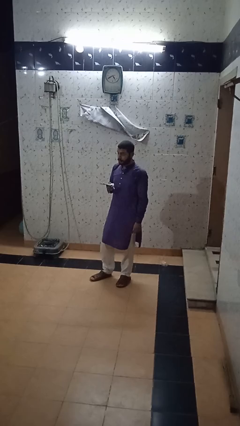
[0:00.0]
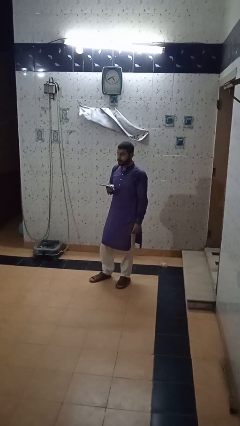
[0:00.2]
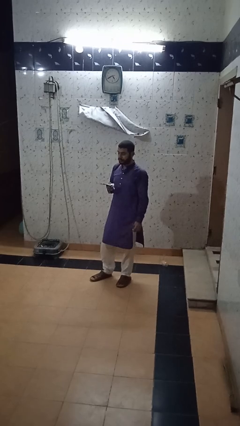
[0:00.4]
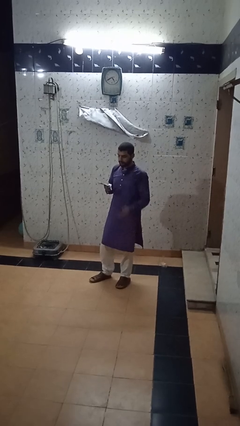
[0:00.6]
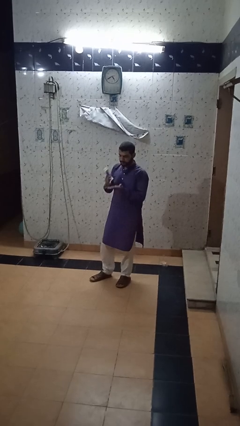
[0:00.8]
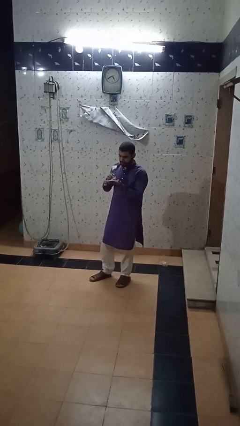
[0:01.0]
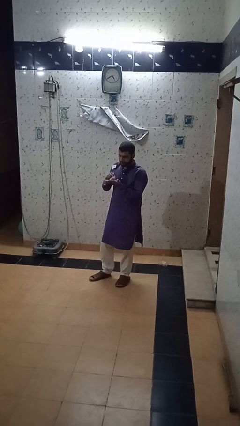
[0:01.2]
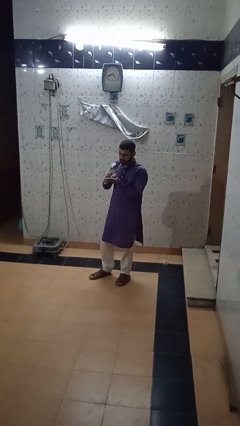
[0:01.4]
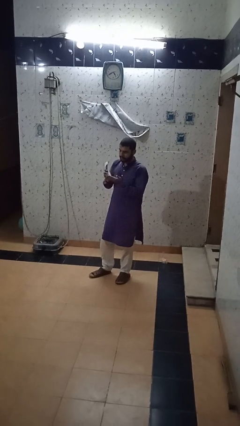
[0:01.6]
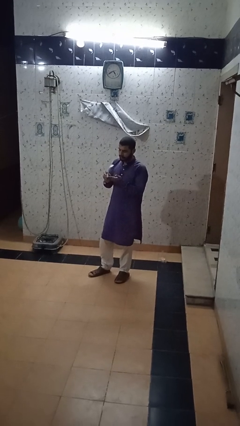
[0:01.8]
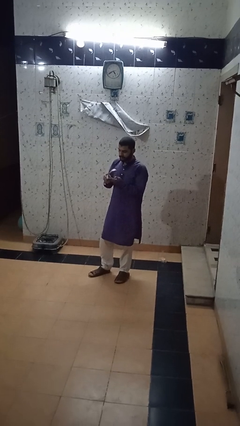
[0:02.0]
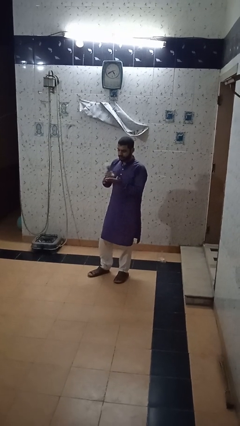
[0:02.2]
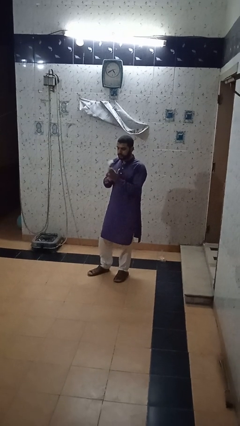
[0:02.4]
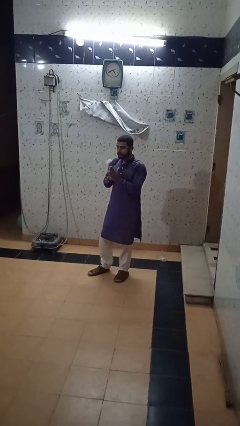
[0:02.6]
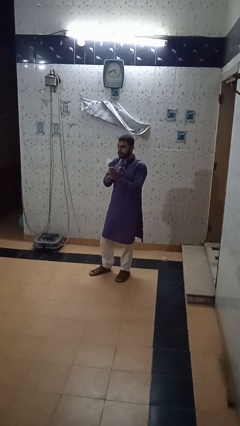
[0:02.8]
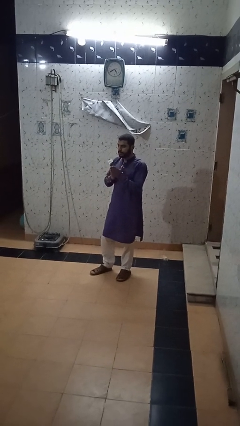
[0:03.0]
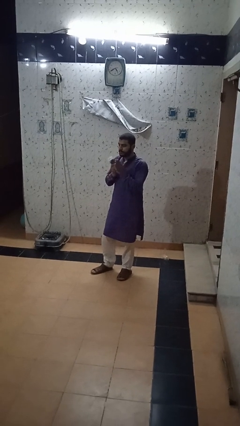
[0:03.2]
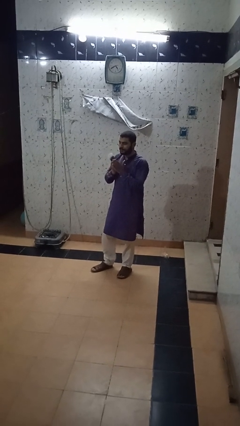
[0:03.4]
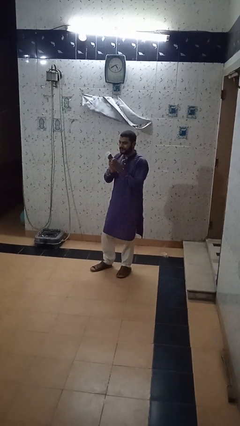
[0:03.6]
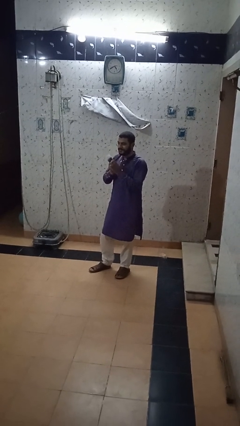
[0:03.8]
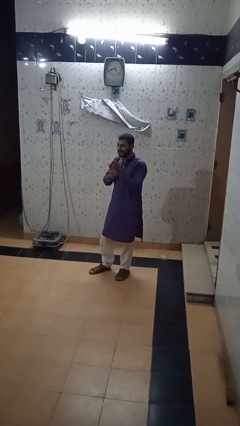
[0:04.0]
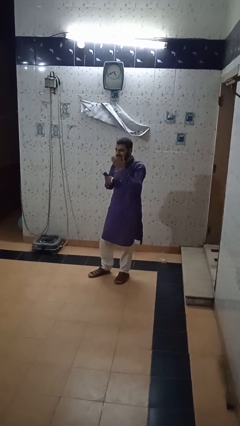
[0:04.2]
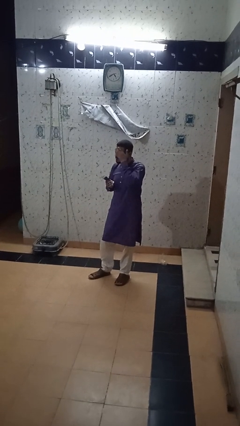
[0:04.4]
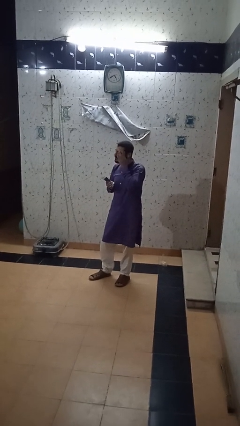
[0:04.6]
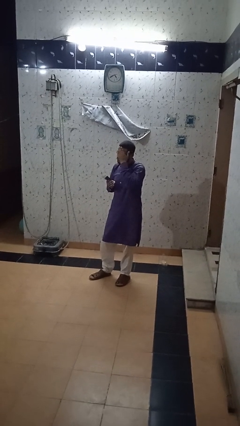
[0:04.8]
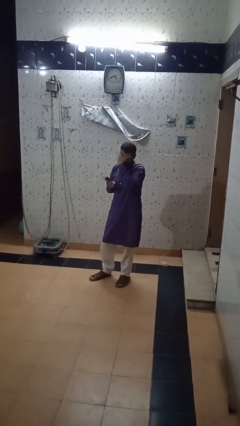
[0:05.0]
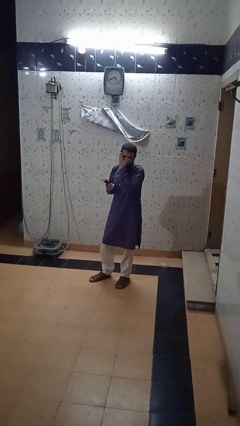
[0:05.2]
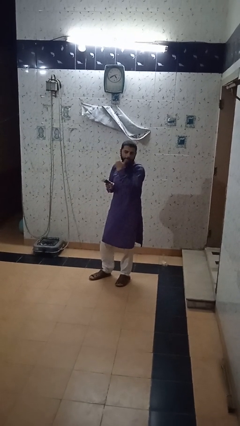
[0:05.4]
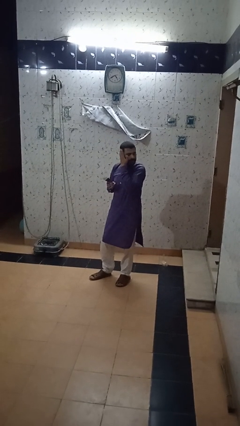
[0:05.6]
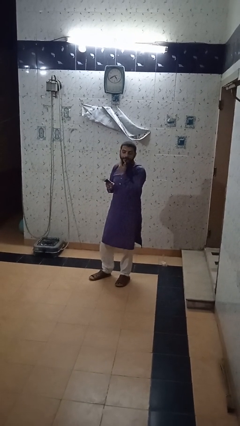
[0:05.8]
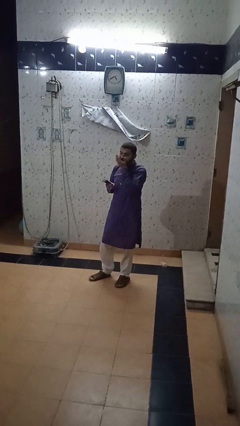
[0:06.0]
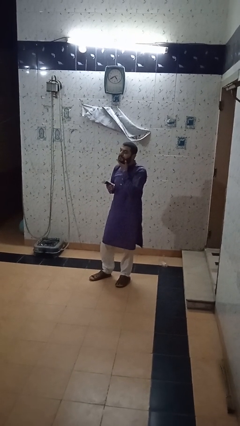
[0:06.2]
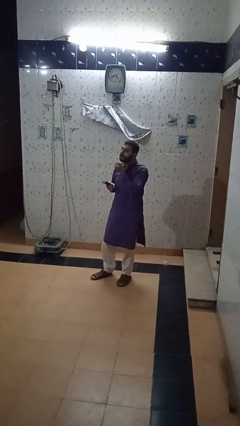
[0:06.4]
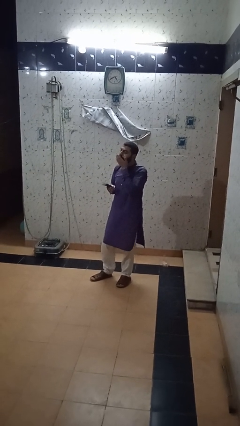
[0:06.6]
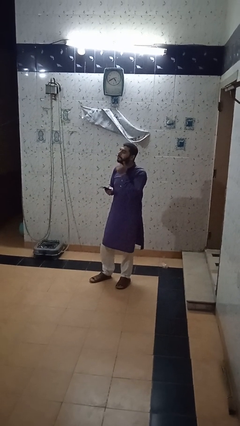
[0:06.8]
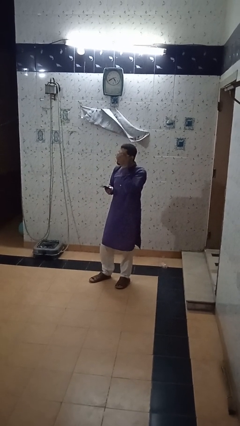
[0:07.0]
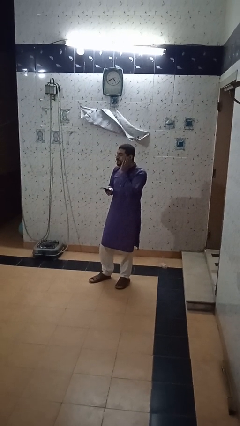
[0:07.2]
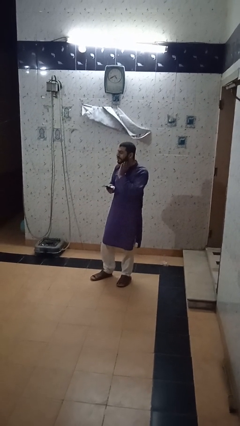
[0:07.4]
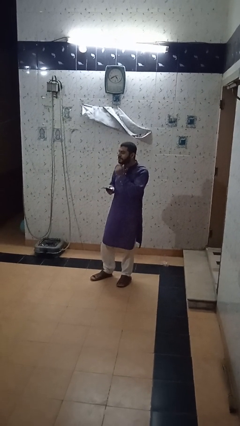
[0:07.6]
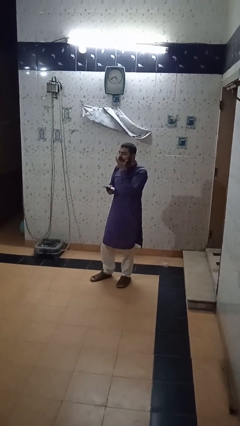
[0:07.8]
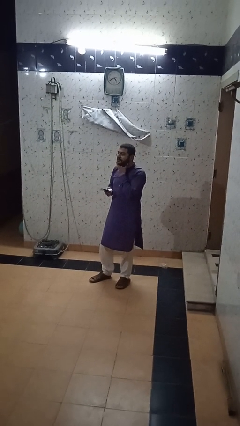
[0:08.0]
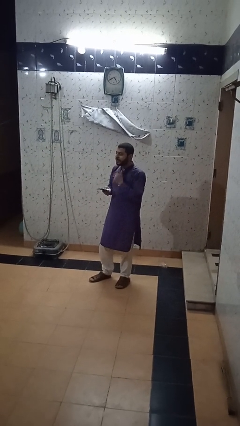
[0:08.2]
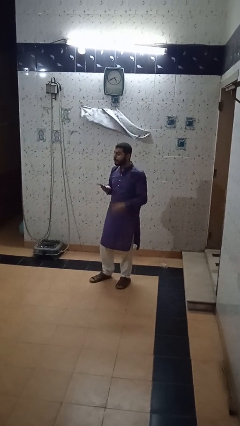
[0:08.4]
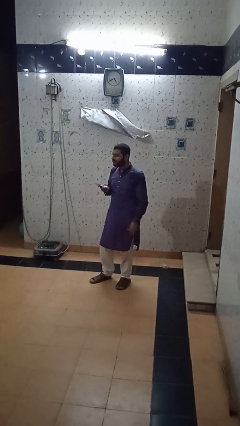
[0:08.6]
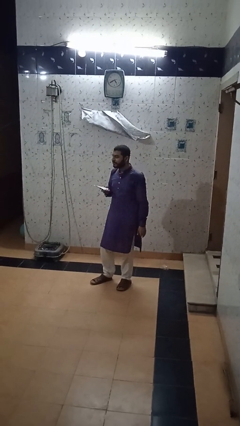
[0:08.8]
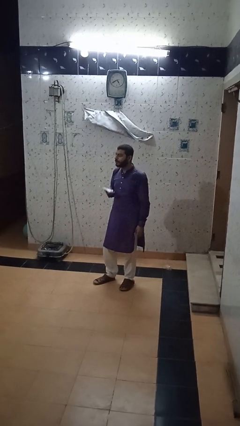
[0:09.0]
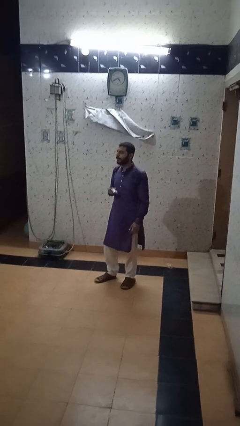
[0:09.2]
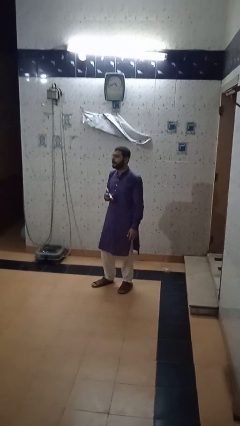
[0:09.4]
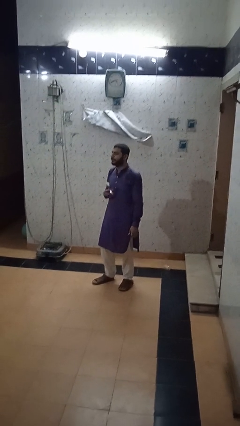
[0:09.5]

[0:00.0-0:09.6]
person applies facial moisturizer

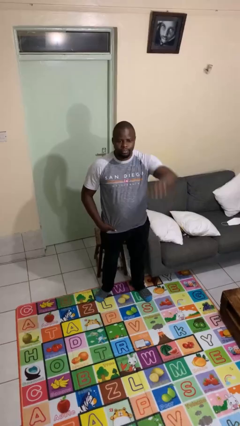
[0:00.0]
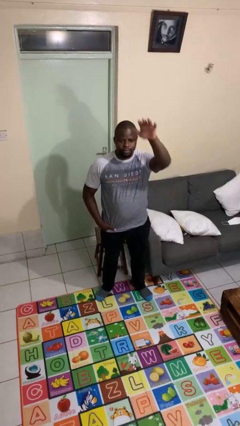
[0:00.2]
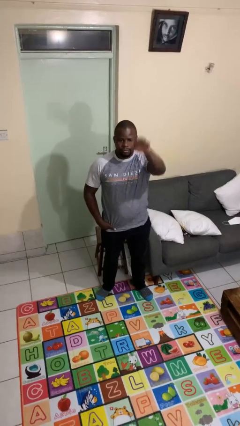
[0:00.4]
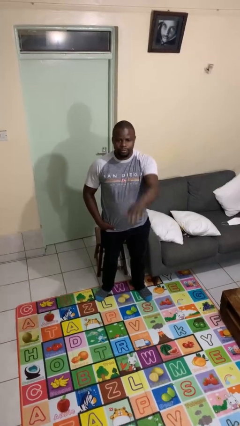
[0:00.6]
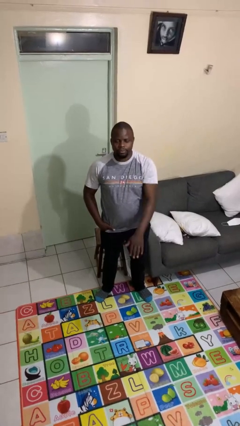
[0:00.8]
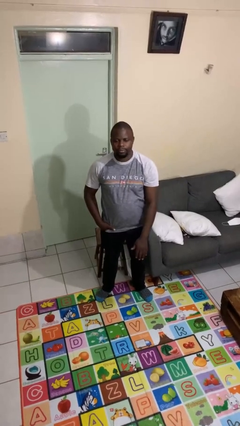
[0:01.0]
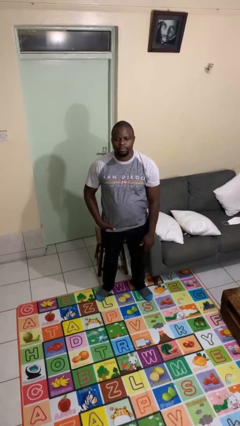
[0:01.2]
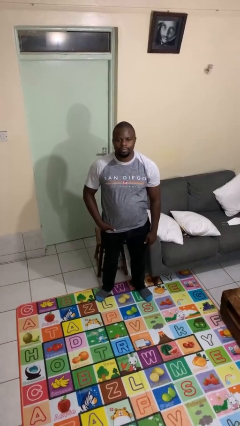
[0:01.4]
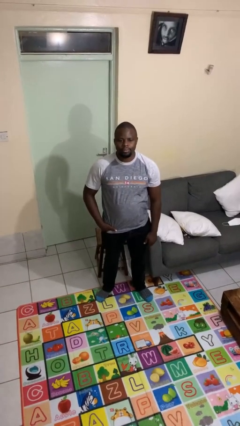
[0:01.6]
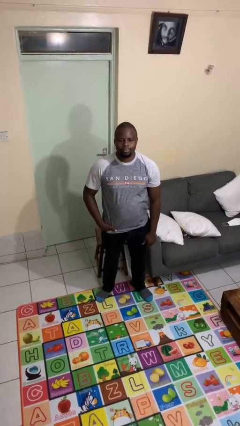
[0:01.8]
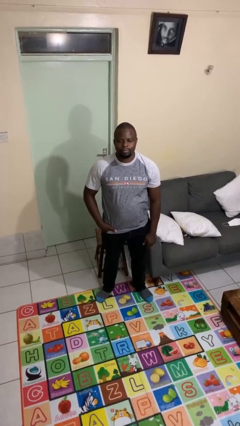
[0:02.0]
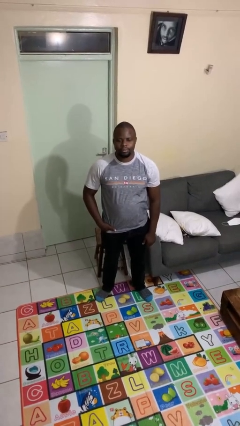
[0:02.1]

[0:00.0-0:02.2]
person gestures swipe down

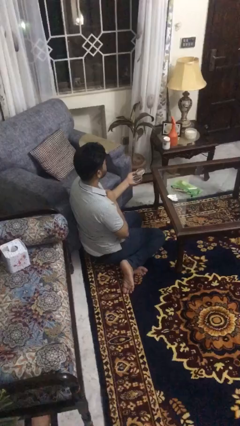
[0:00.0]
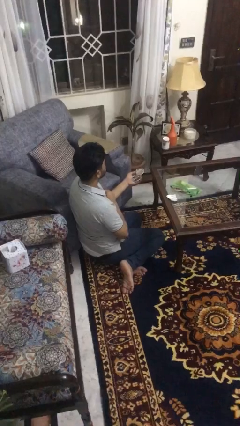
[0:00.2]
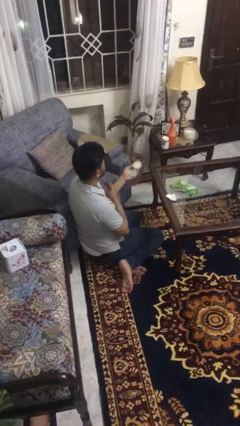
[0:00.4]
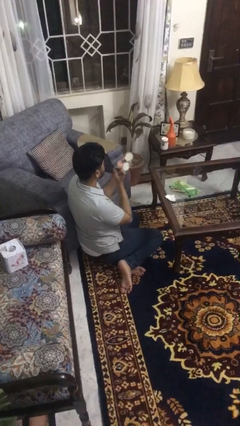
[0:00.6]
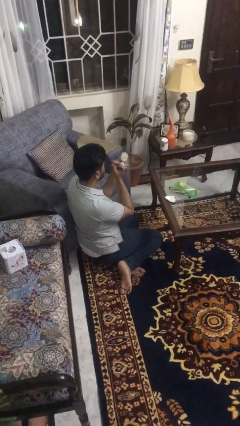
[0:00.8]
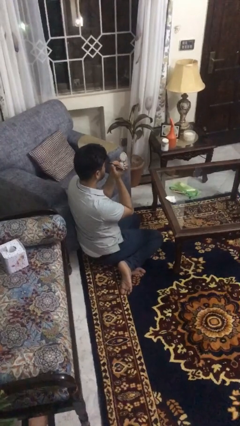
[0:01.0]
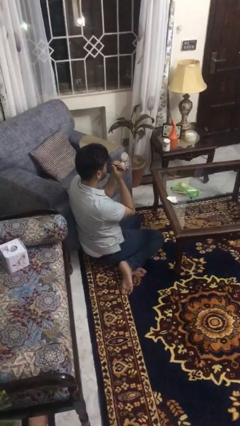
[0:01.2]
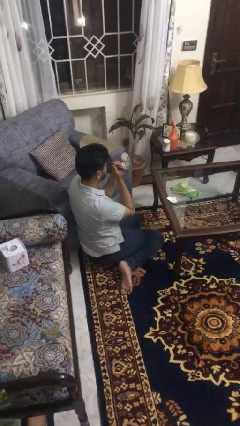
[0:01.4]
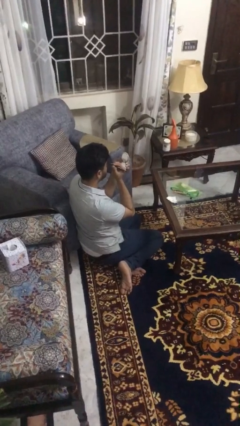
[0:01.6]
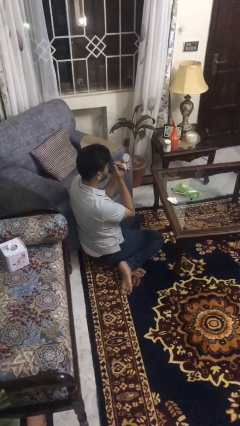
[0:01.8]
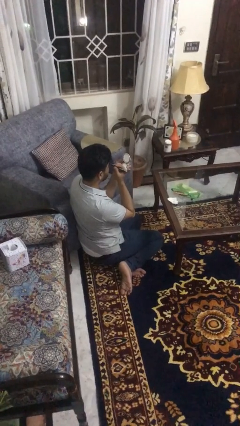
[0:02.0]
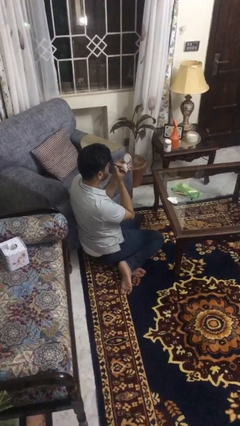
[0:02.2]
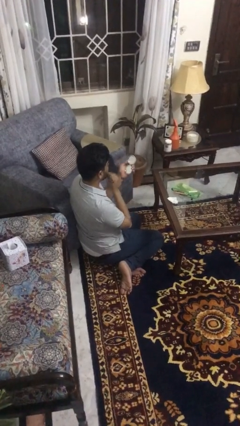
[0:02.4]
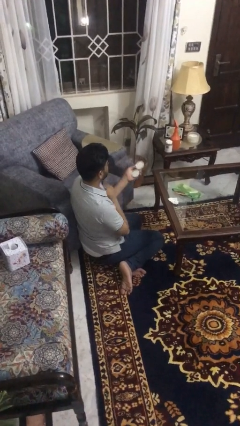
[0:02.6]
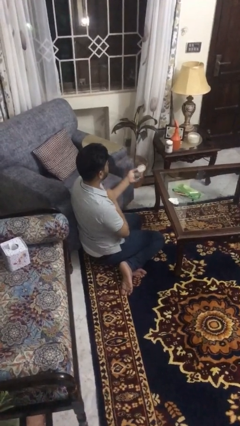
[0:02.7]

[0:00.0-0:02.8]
person applies eye makeup

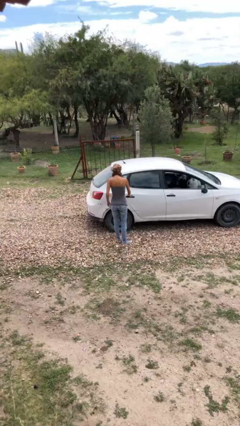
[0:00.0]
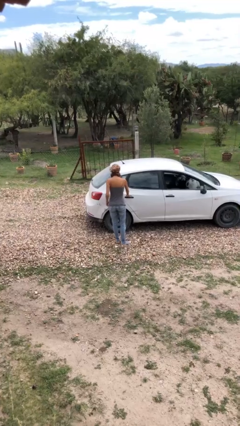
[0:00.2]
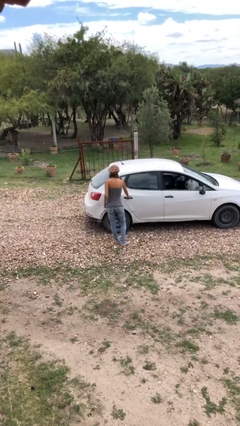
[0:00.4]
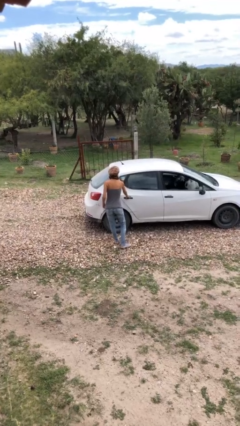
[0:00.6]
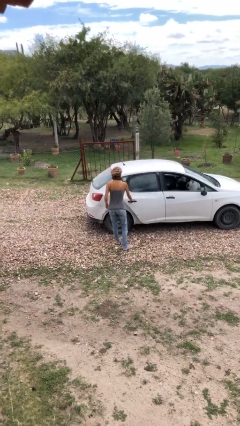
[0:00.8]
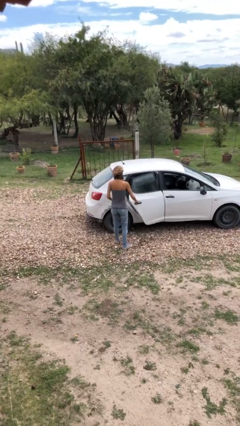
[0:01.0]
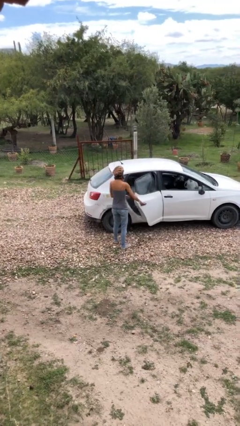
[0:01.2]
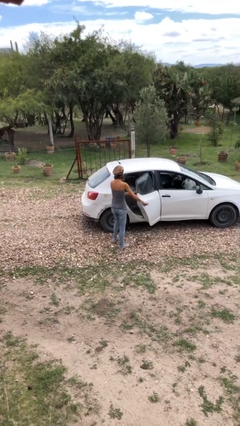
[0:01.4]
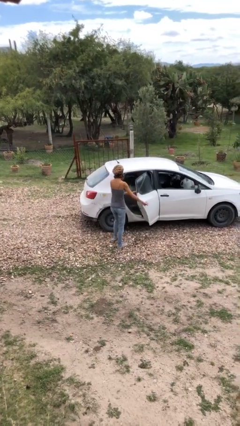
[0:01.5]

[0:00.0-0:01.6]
person opens car door

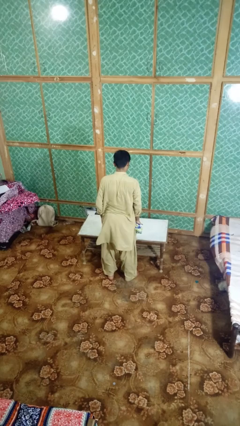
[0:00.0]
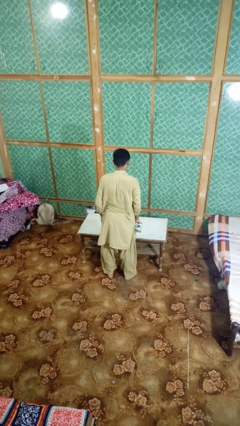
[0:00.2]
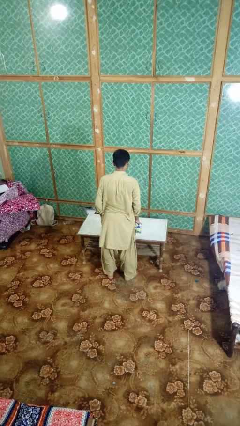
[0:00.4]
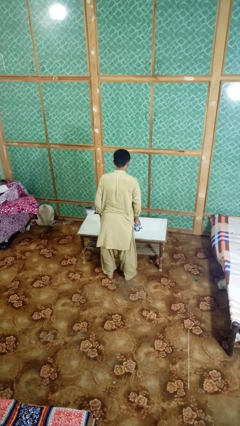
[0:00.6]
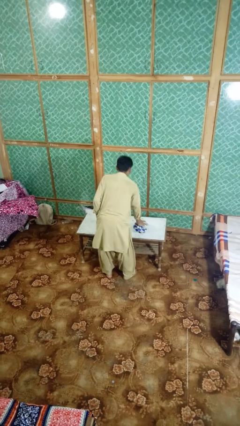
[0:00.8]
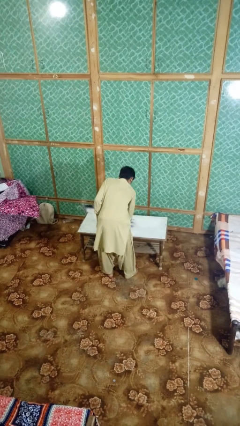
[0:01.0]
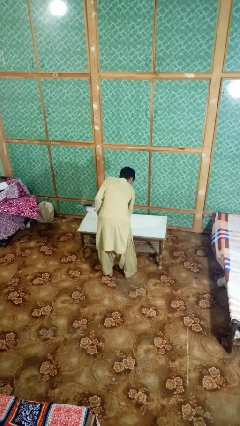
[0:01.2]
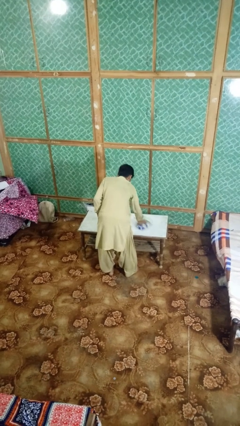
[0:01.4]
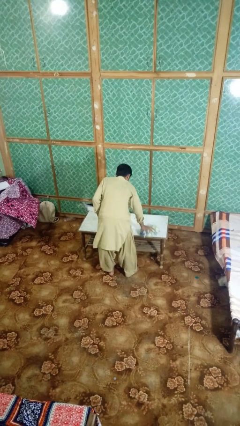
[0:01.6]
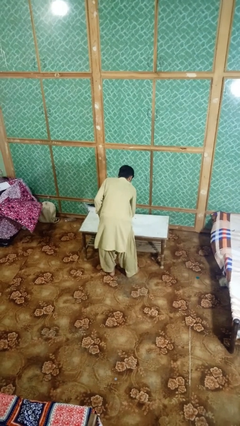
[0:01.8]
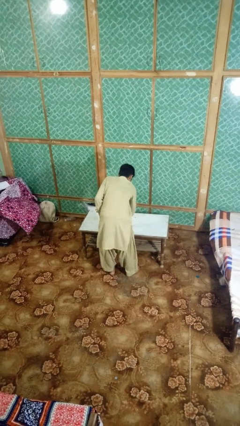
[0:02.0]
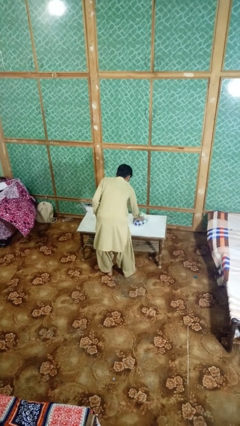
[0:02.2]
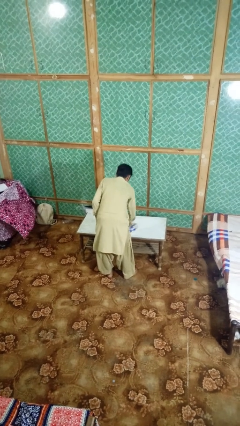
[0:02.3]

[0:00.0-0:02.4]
person cleans table with rag
